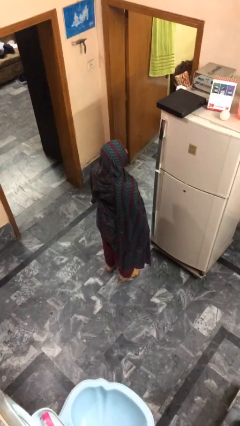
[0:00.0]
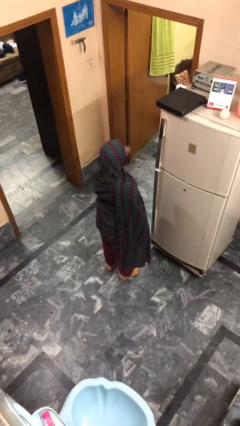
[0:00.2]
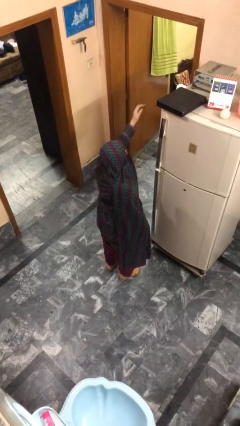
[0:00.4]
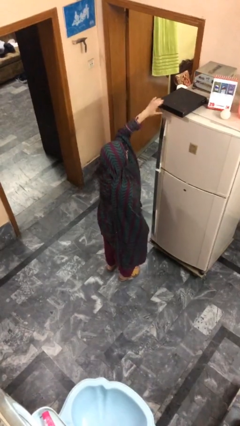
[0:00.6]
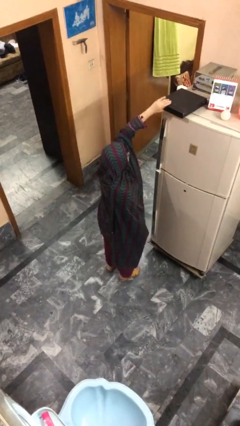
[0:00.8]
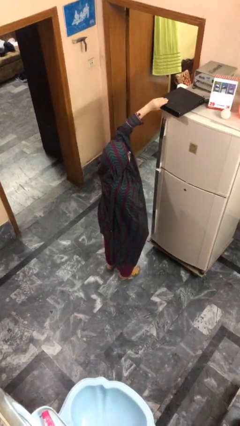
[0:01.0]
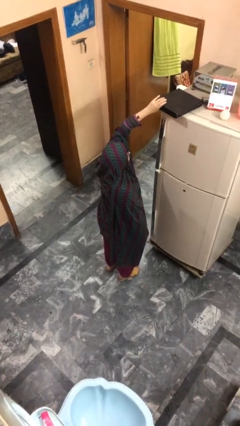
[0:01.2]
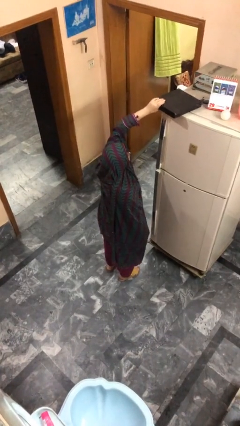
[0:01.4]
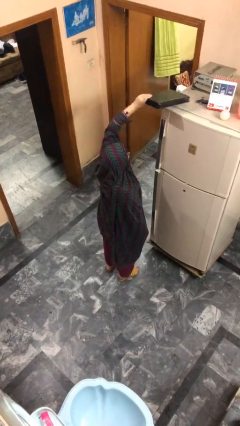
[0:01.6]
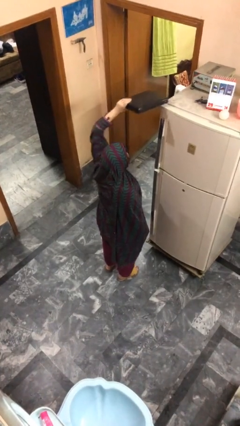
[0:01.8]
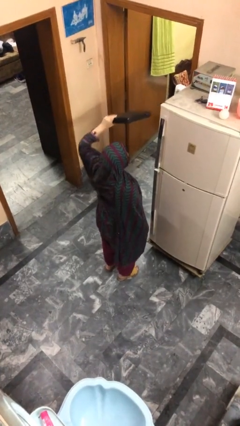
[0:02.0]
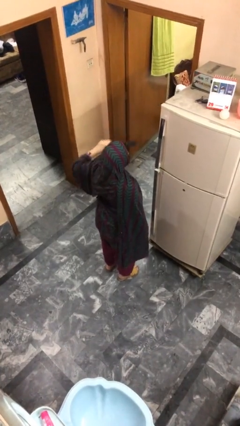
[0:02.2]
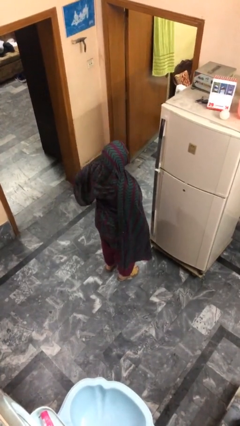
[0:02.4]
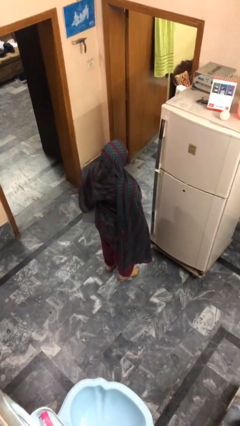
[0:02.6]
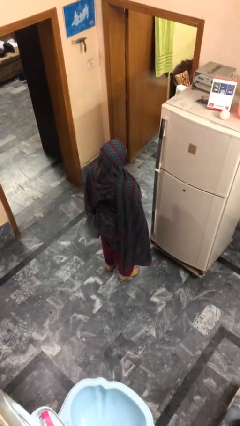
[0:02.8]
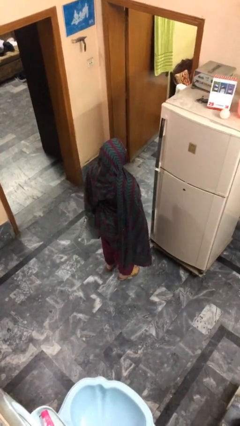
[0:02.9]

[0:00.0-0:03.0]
person picks up object from shelf

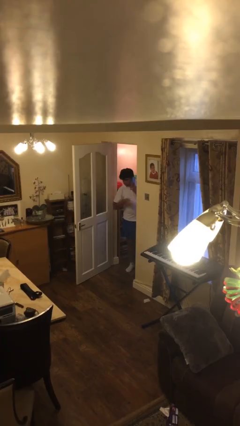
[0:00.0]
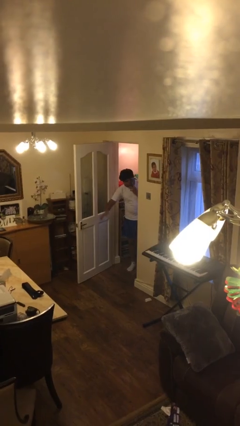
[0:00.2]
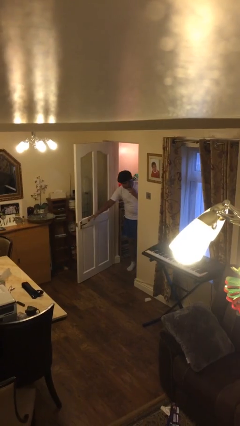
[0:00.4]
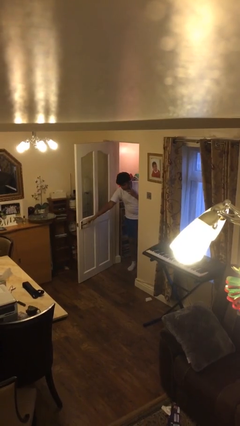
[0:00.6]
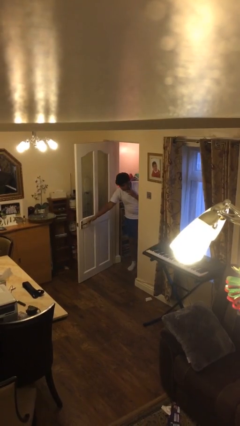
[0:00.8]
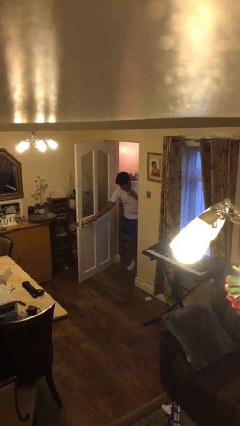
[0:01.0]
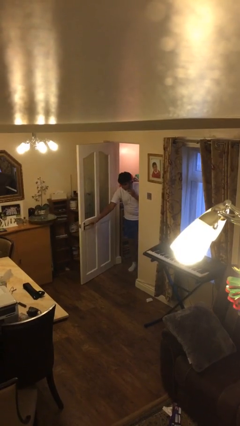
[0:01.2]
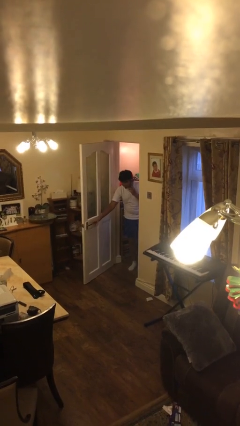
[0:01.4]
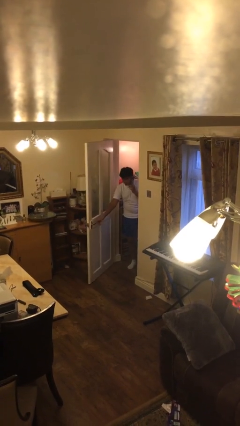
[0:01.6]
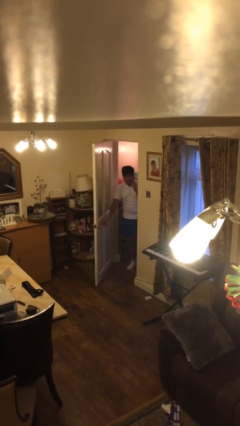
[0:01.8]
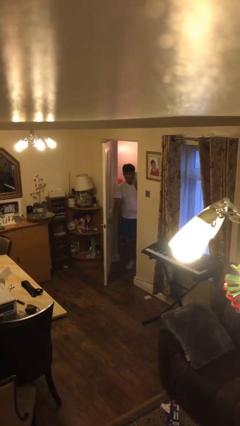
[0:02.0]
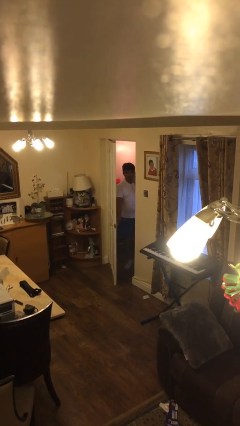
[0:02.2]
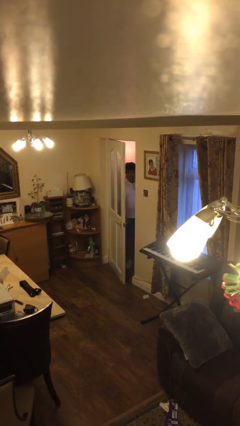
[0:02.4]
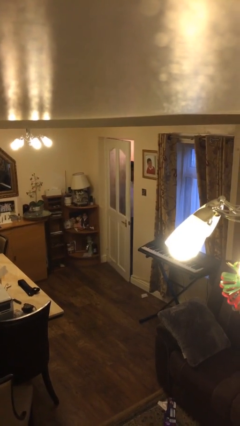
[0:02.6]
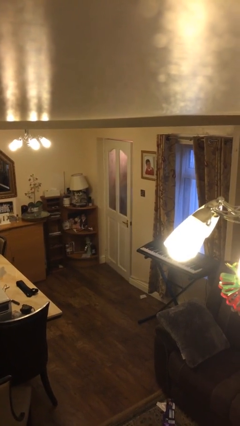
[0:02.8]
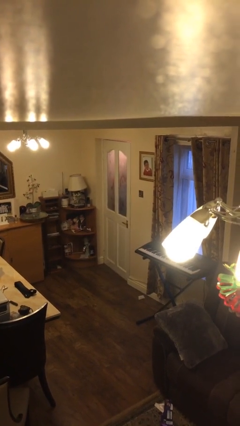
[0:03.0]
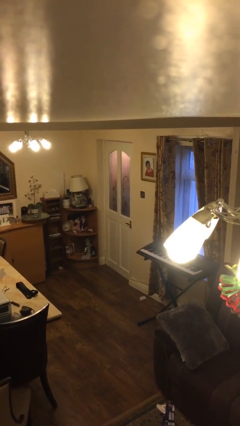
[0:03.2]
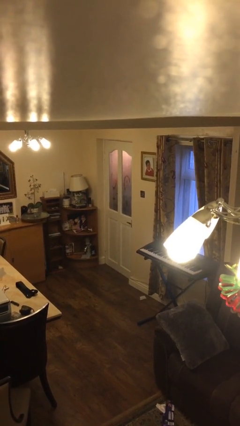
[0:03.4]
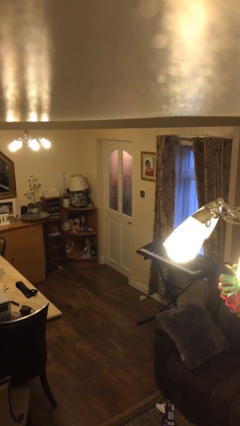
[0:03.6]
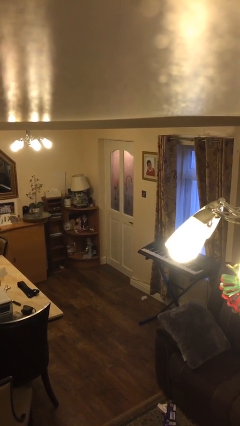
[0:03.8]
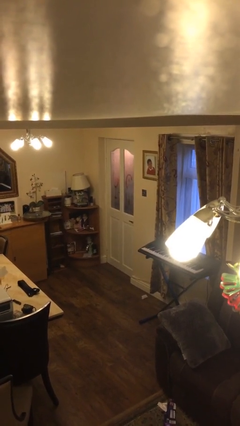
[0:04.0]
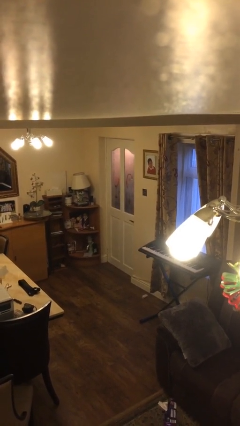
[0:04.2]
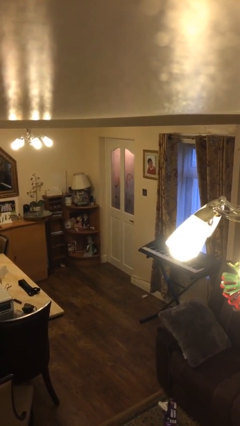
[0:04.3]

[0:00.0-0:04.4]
person closes facility door

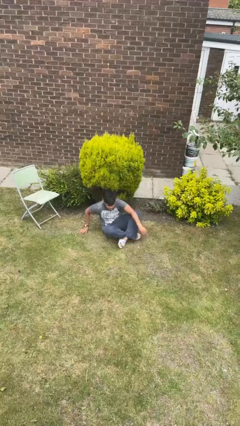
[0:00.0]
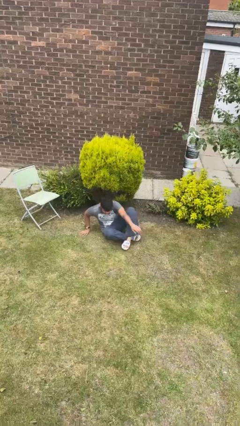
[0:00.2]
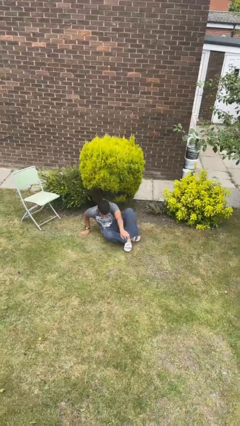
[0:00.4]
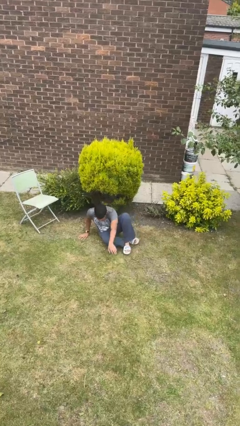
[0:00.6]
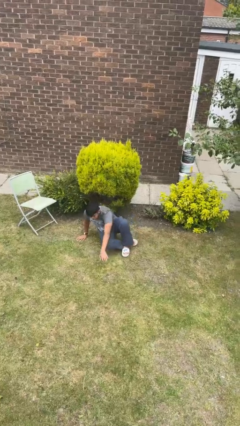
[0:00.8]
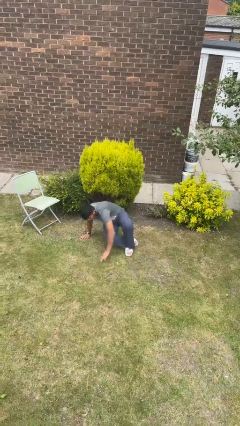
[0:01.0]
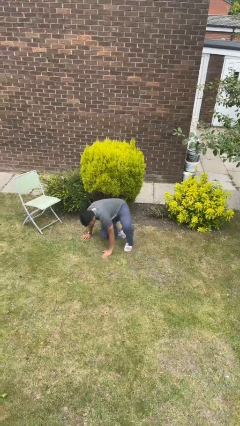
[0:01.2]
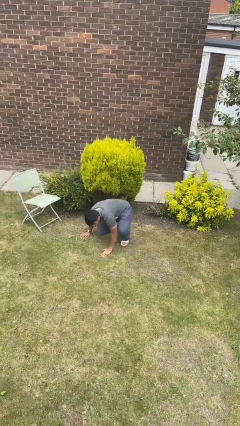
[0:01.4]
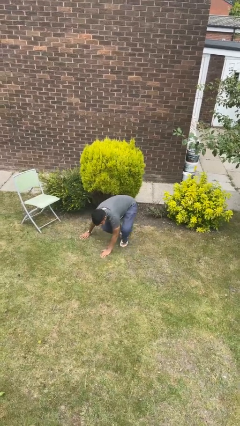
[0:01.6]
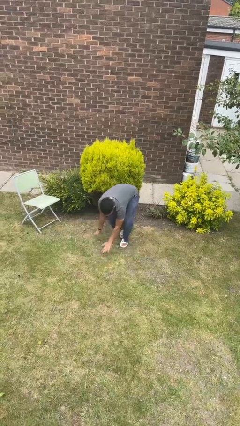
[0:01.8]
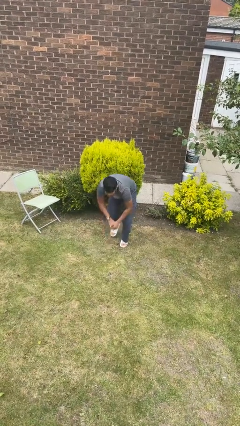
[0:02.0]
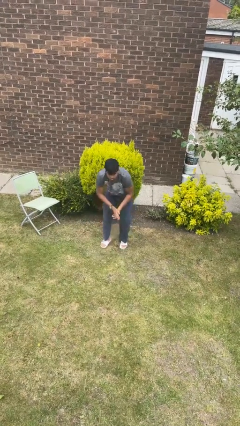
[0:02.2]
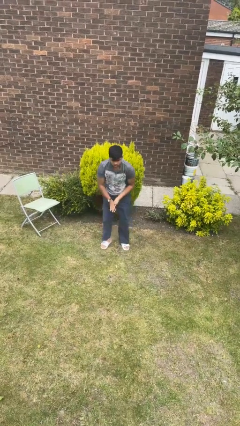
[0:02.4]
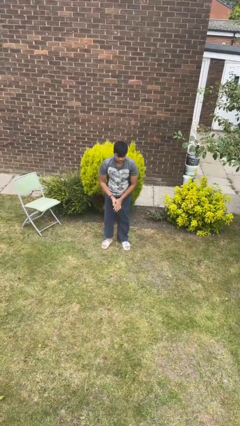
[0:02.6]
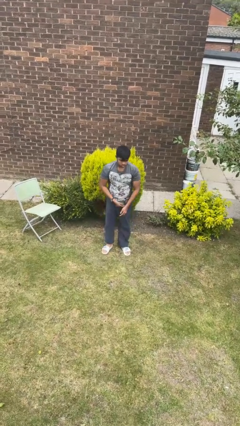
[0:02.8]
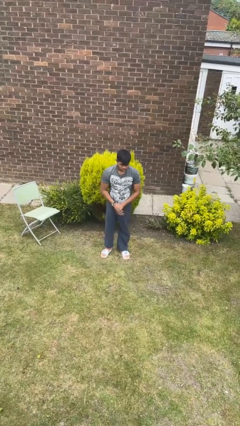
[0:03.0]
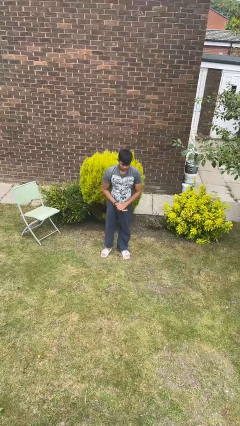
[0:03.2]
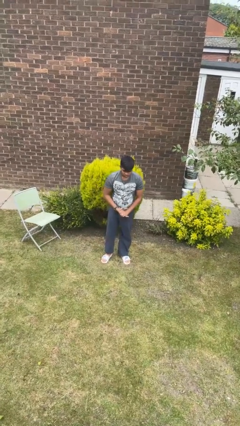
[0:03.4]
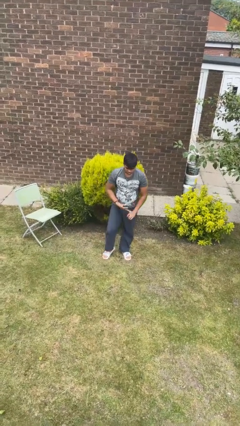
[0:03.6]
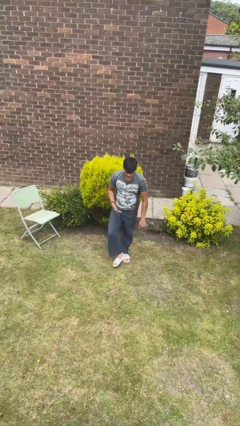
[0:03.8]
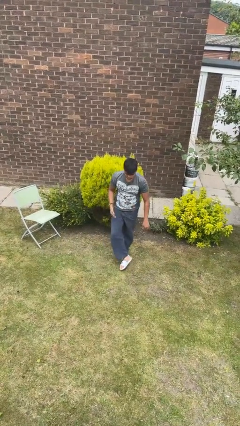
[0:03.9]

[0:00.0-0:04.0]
person stands up from floor

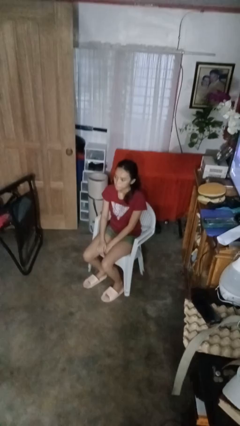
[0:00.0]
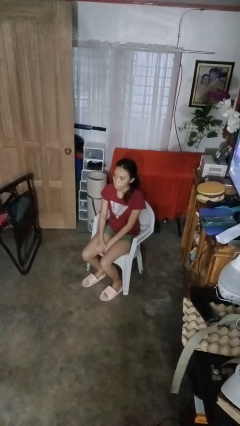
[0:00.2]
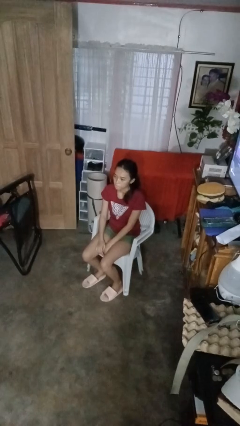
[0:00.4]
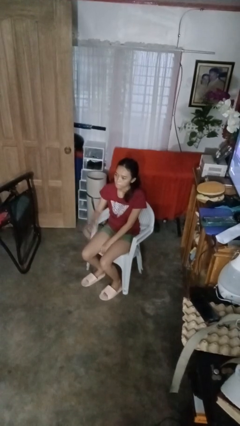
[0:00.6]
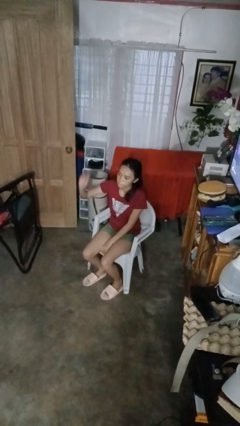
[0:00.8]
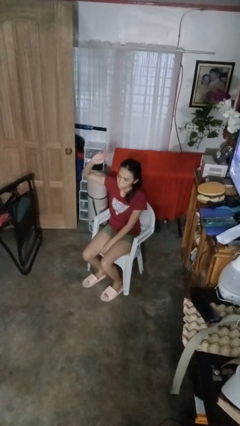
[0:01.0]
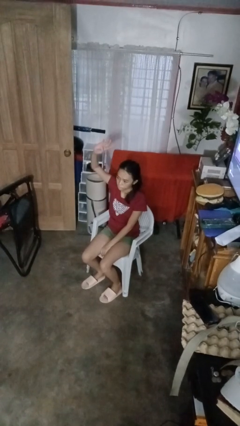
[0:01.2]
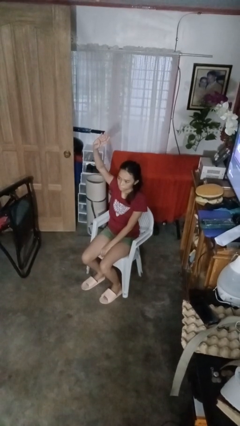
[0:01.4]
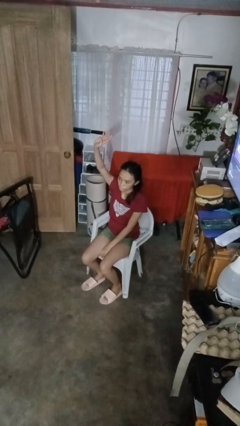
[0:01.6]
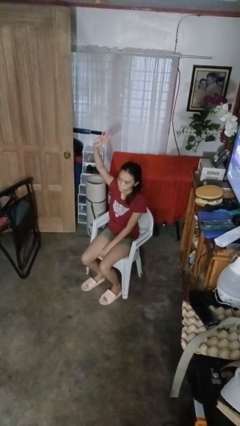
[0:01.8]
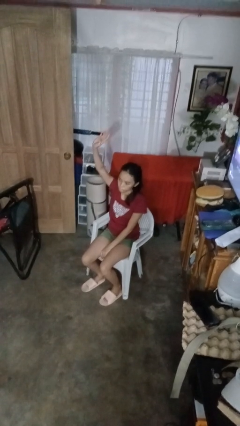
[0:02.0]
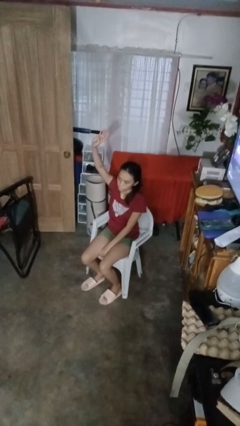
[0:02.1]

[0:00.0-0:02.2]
person gestures raise hand

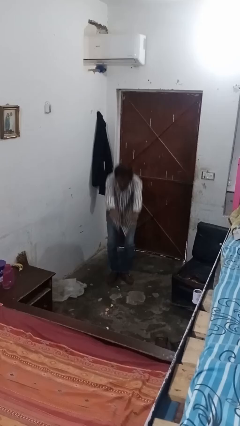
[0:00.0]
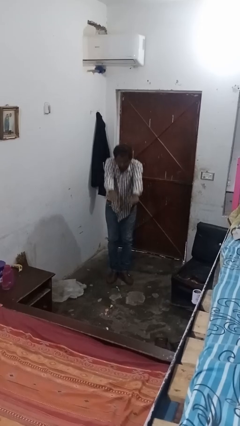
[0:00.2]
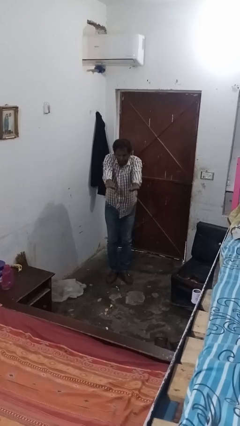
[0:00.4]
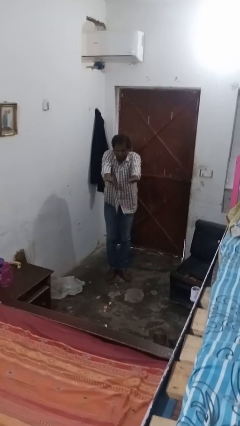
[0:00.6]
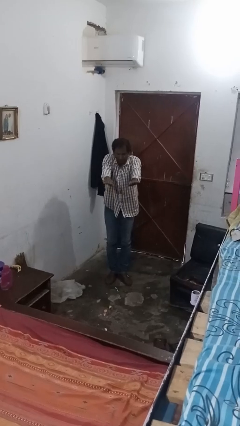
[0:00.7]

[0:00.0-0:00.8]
person stands up

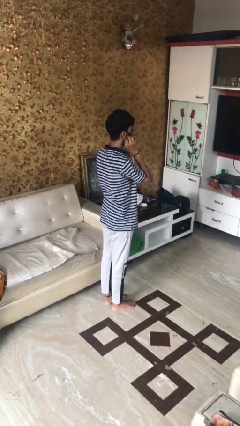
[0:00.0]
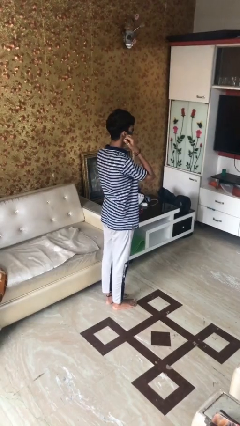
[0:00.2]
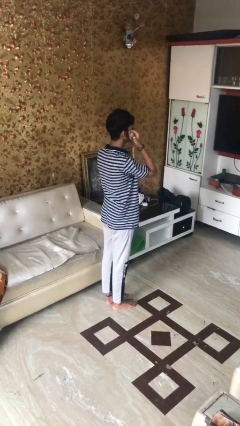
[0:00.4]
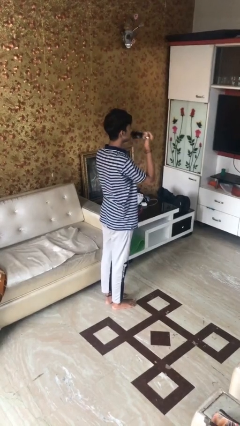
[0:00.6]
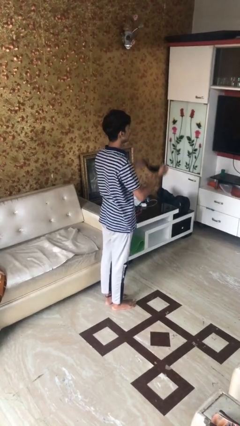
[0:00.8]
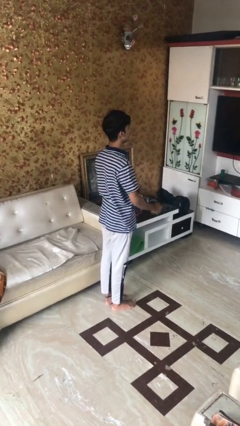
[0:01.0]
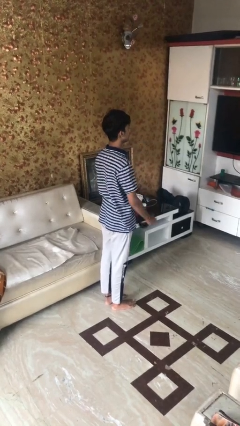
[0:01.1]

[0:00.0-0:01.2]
person takes off facemask

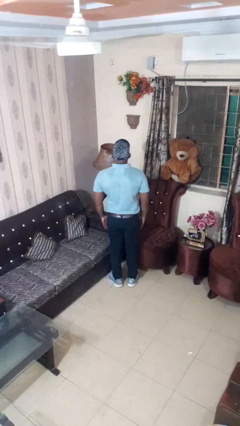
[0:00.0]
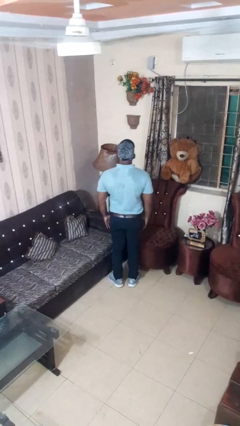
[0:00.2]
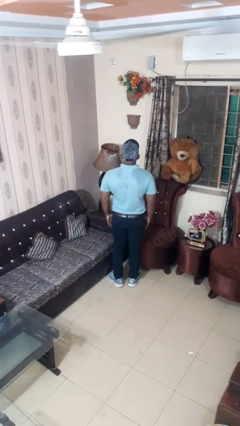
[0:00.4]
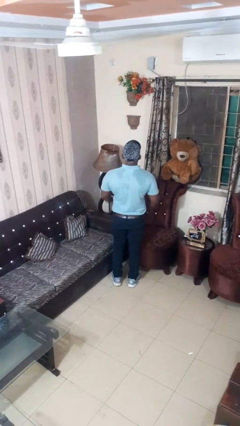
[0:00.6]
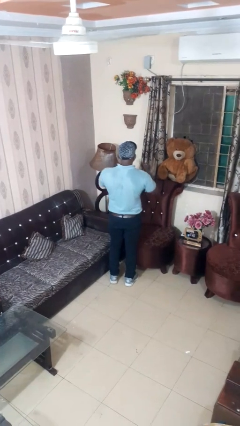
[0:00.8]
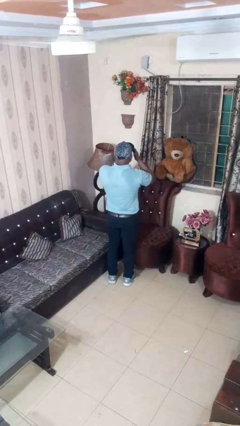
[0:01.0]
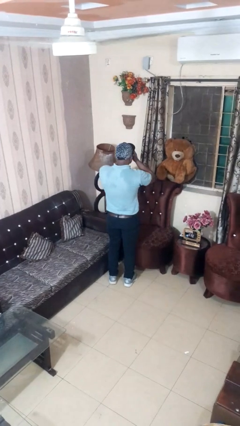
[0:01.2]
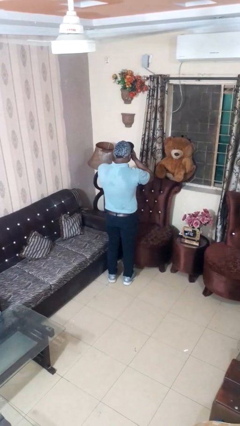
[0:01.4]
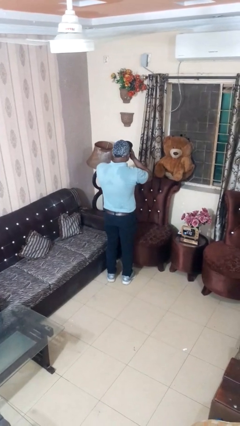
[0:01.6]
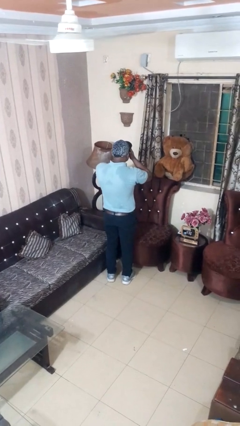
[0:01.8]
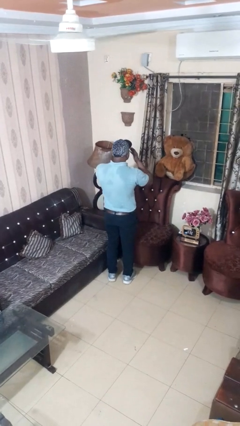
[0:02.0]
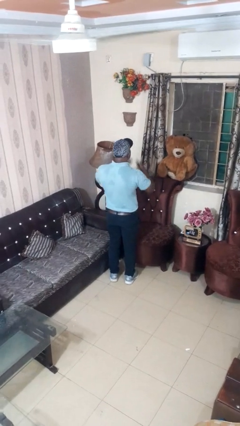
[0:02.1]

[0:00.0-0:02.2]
person covers face with hands
